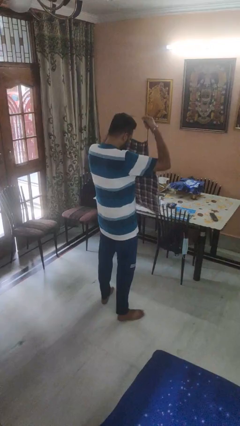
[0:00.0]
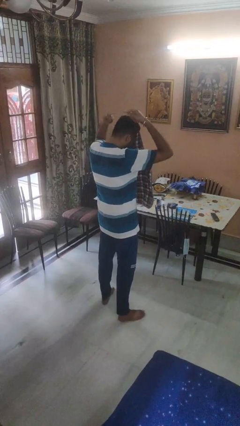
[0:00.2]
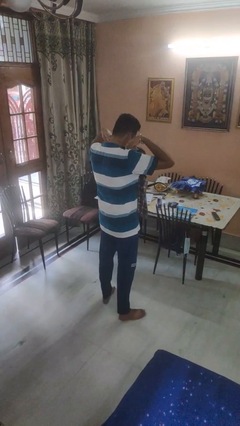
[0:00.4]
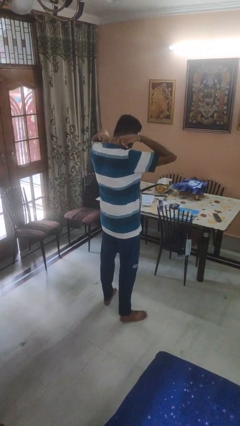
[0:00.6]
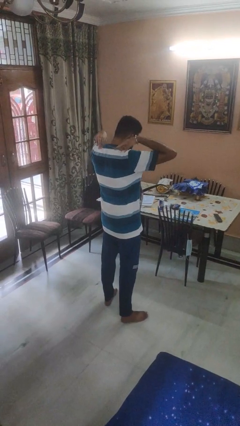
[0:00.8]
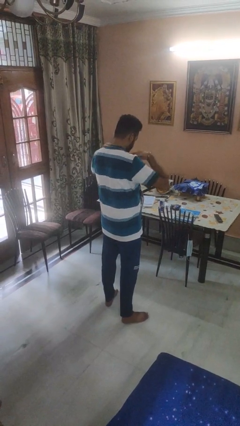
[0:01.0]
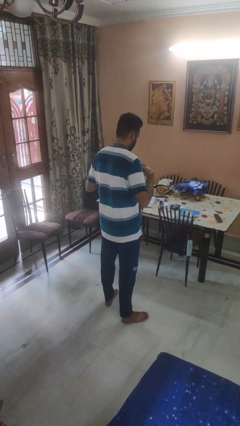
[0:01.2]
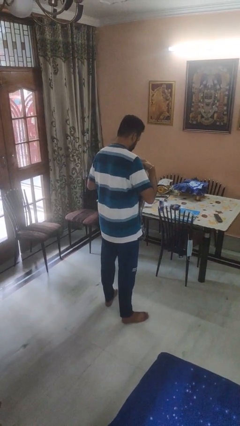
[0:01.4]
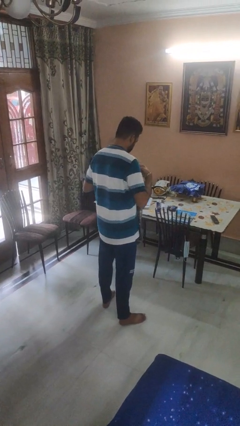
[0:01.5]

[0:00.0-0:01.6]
person puts on apron

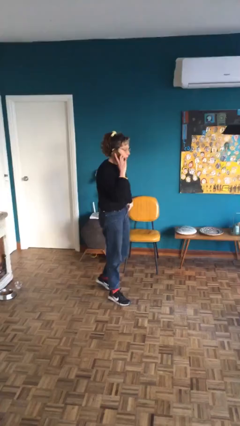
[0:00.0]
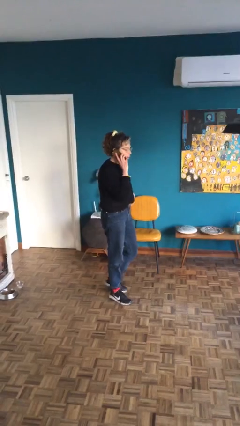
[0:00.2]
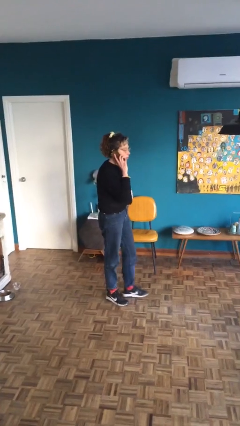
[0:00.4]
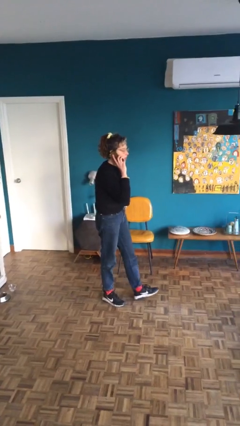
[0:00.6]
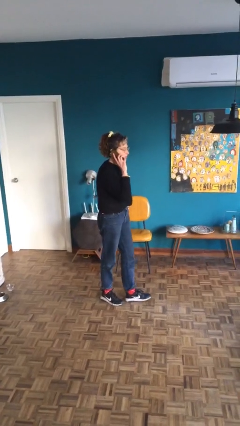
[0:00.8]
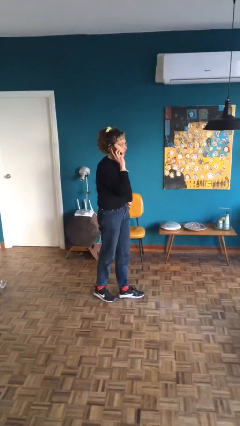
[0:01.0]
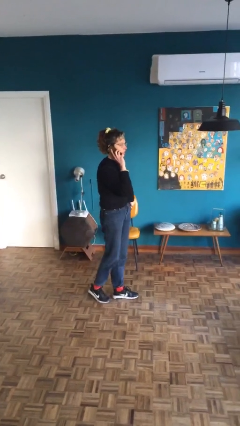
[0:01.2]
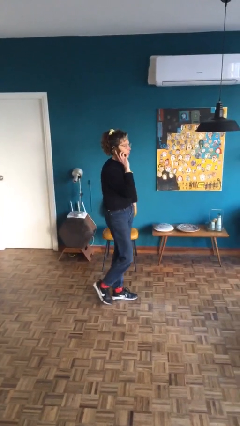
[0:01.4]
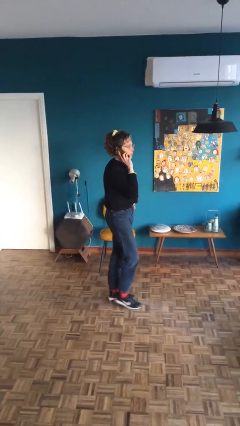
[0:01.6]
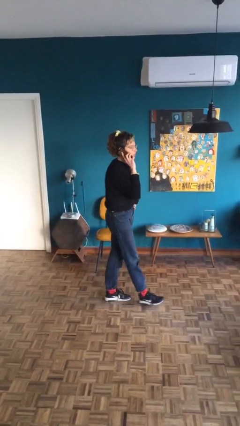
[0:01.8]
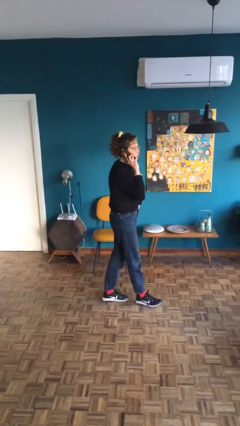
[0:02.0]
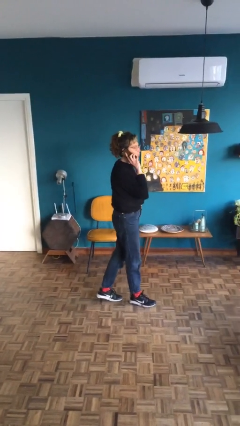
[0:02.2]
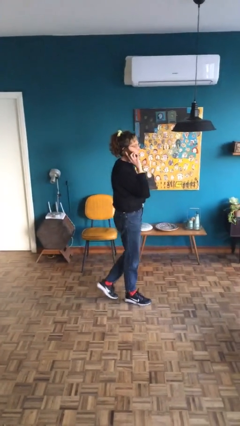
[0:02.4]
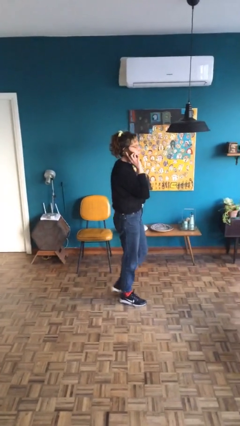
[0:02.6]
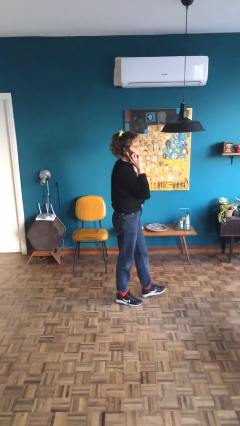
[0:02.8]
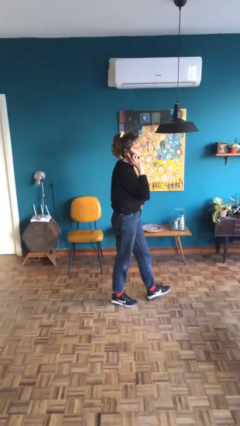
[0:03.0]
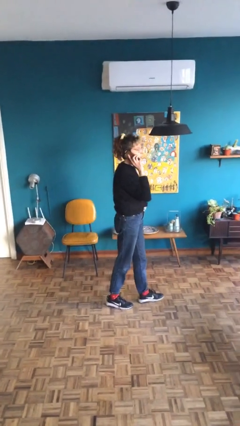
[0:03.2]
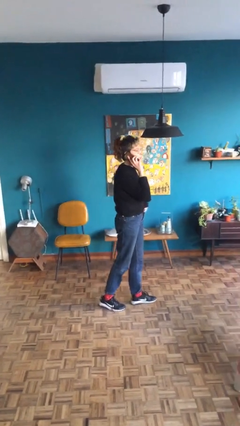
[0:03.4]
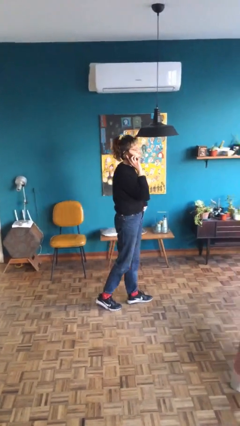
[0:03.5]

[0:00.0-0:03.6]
person talks on phone

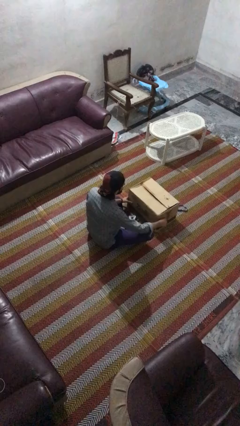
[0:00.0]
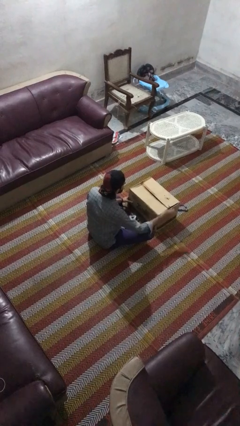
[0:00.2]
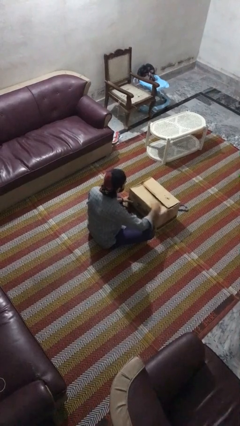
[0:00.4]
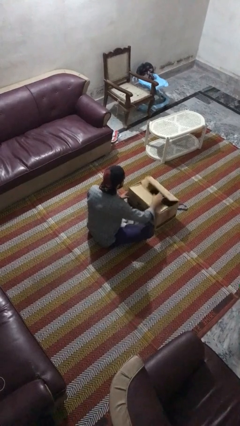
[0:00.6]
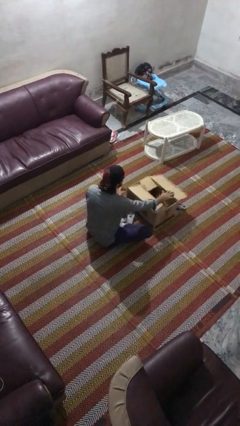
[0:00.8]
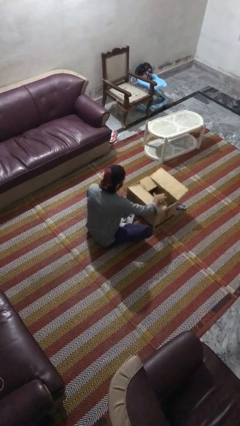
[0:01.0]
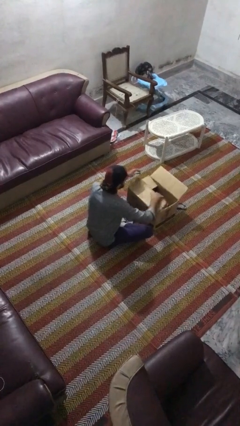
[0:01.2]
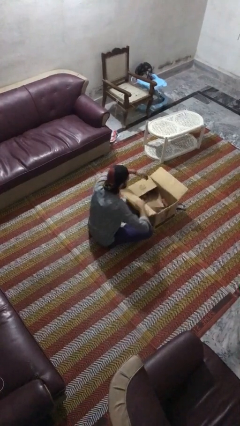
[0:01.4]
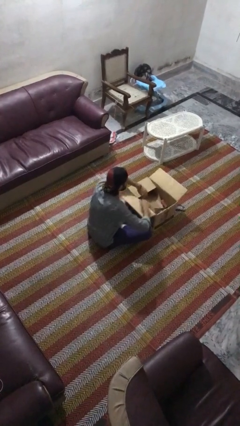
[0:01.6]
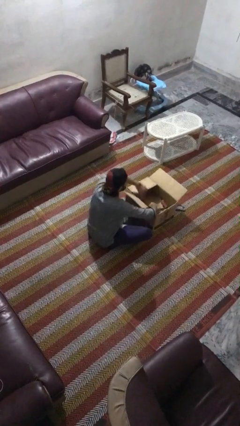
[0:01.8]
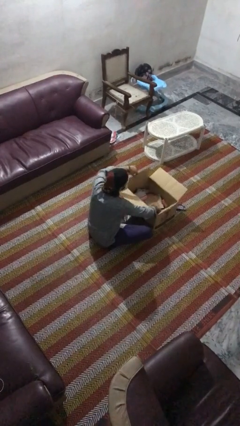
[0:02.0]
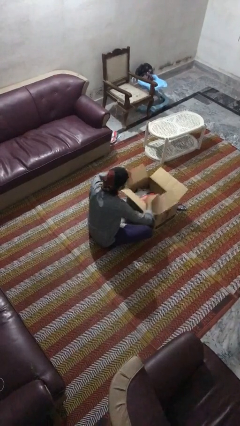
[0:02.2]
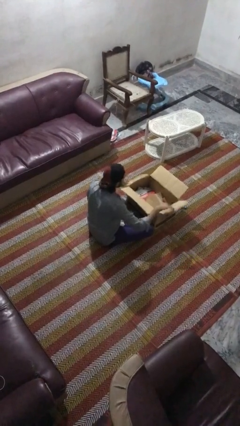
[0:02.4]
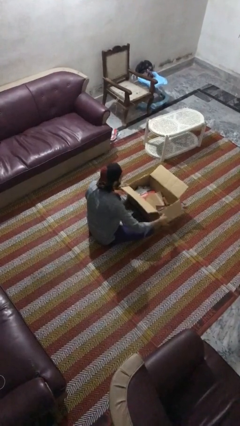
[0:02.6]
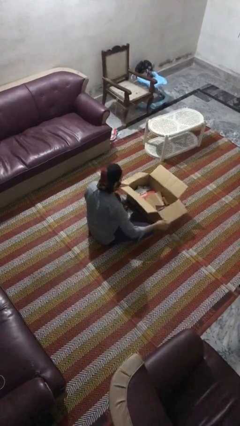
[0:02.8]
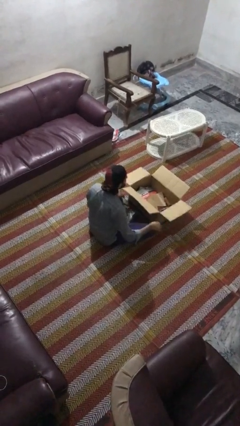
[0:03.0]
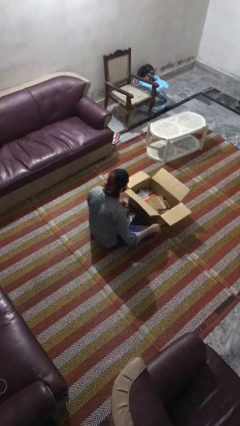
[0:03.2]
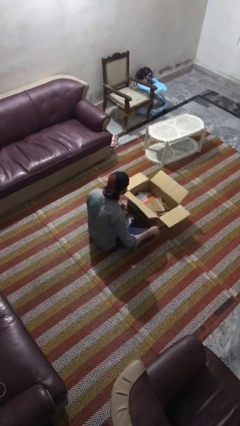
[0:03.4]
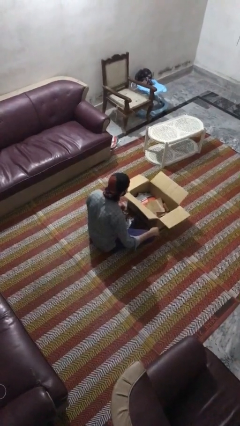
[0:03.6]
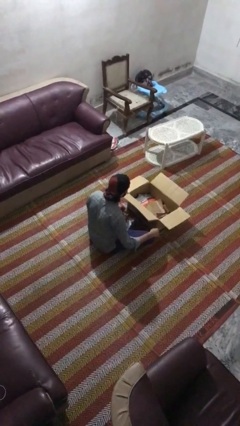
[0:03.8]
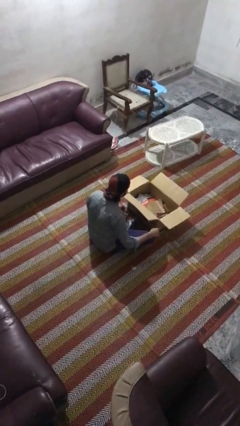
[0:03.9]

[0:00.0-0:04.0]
person opens box

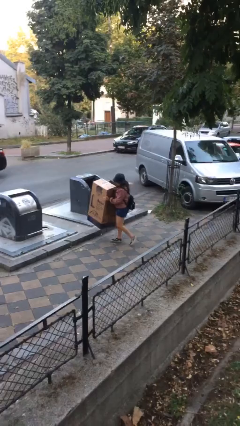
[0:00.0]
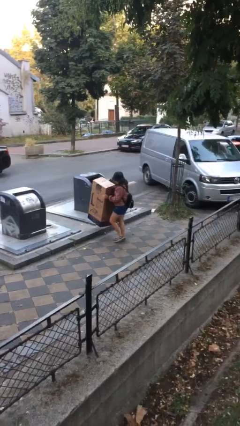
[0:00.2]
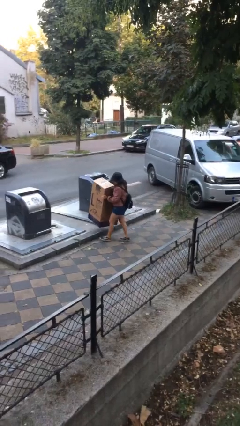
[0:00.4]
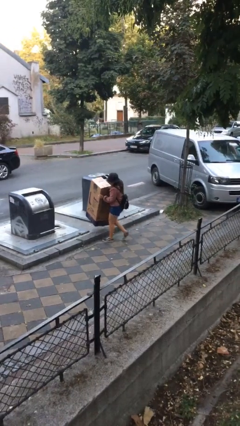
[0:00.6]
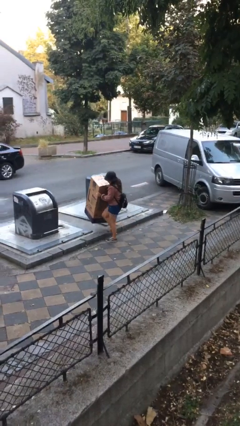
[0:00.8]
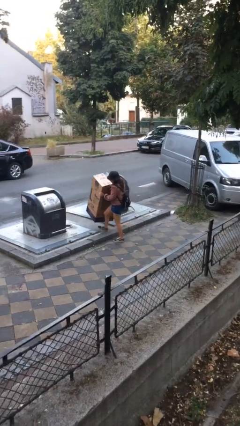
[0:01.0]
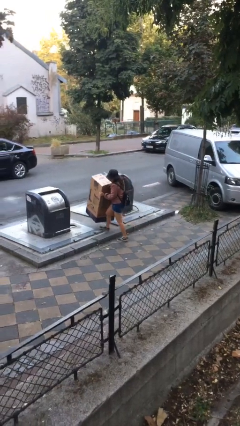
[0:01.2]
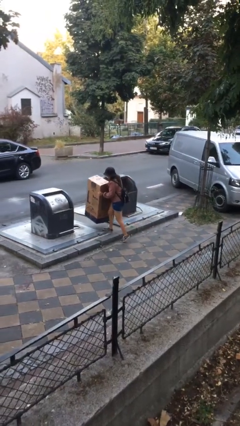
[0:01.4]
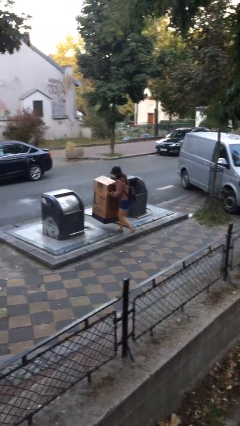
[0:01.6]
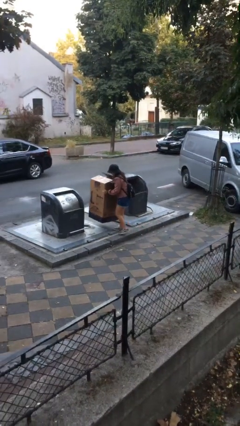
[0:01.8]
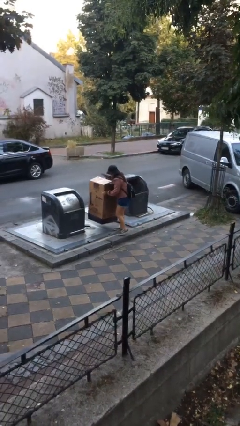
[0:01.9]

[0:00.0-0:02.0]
person carries heavy object

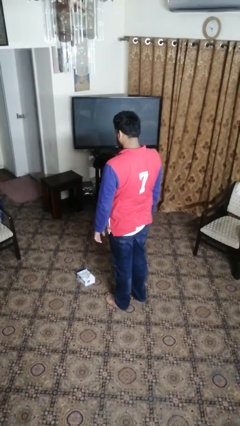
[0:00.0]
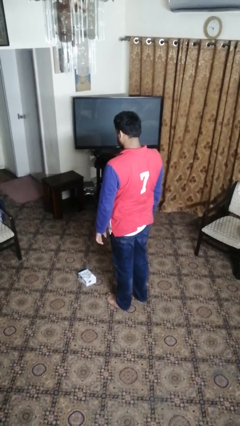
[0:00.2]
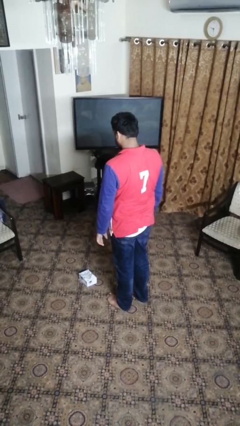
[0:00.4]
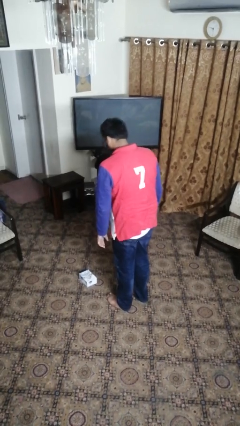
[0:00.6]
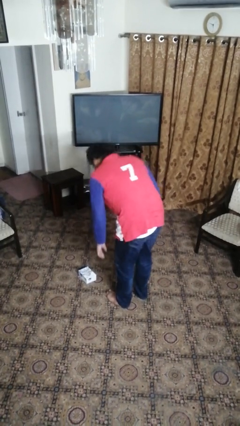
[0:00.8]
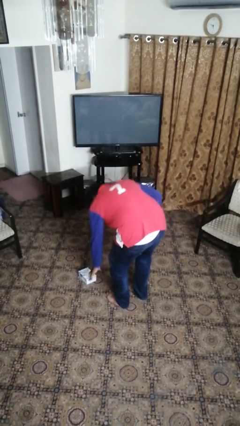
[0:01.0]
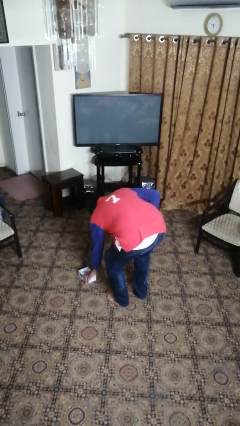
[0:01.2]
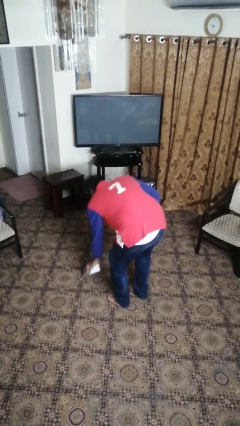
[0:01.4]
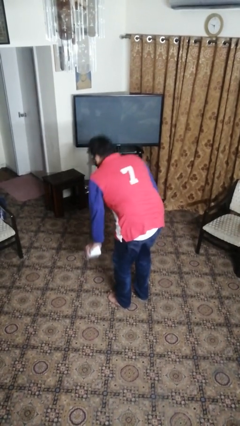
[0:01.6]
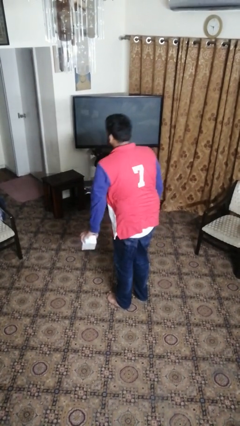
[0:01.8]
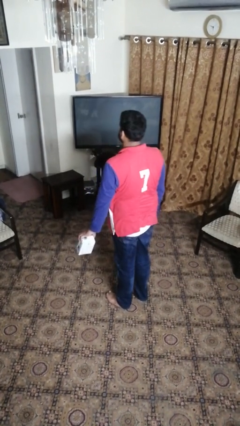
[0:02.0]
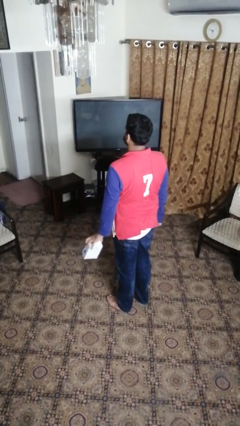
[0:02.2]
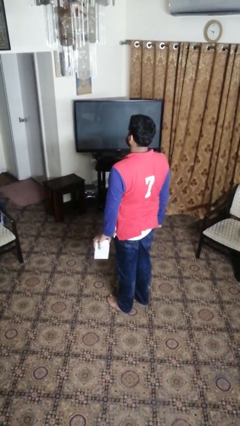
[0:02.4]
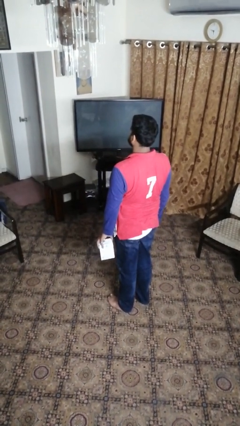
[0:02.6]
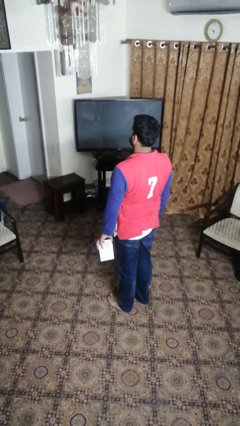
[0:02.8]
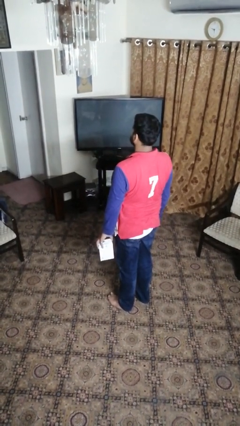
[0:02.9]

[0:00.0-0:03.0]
person picks up object from floor

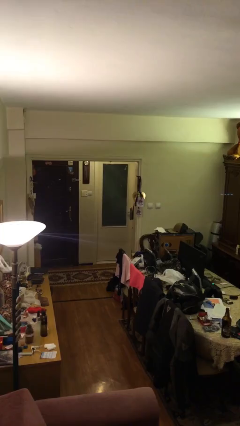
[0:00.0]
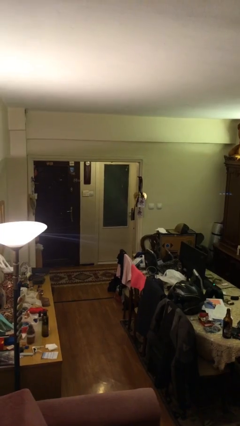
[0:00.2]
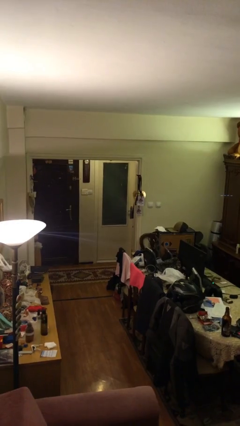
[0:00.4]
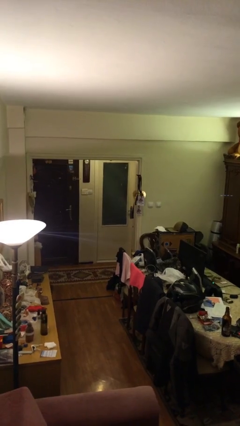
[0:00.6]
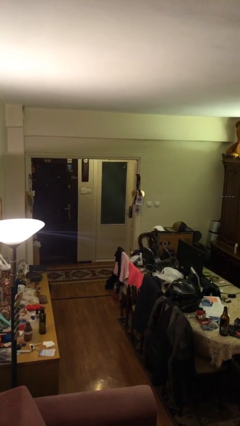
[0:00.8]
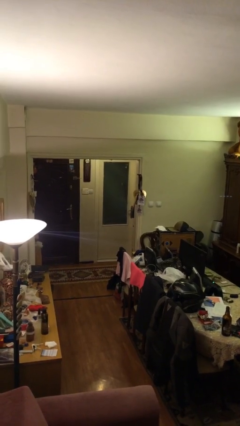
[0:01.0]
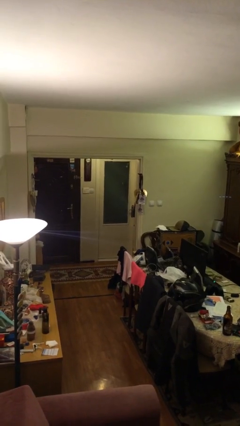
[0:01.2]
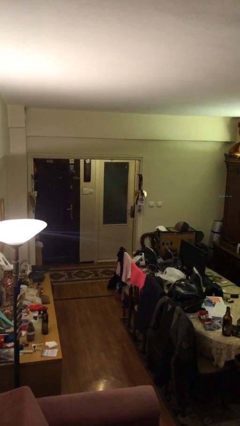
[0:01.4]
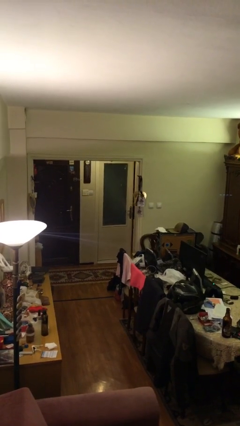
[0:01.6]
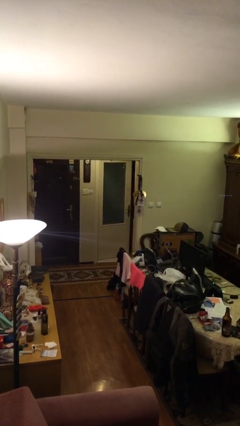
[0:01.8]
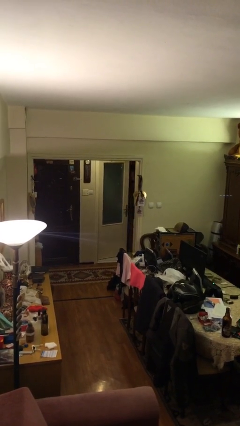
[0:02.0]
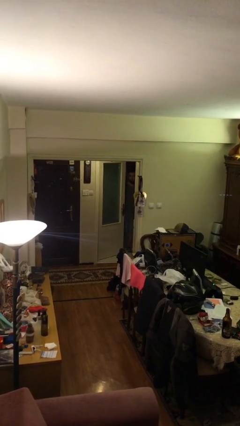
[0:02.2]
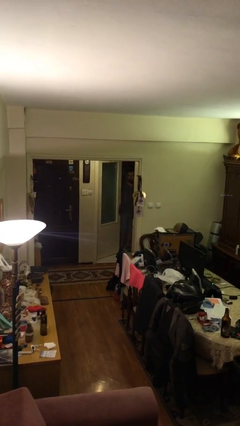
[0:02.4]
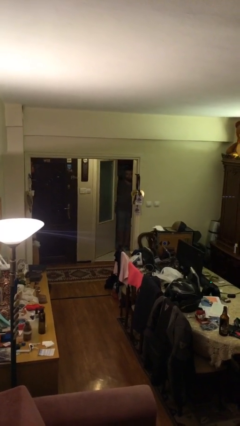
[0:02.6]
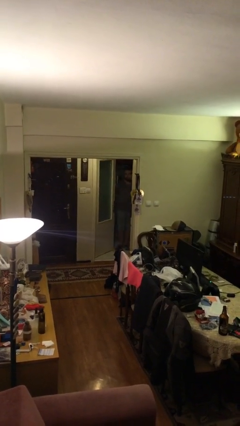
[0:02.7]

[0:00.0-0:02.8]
person opens facility door

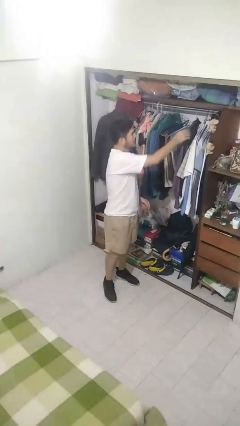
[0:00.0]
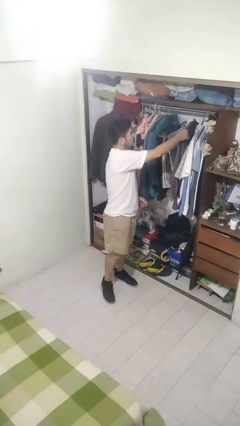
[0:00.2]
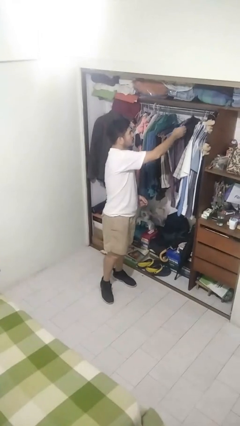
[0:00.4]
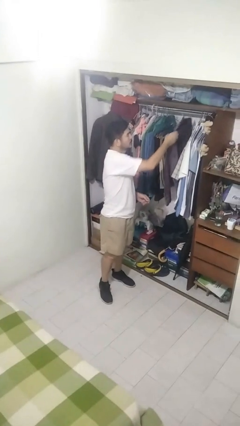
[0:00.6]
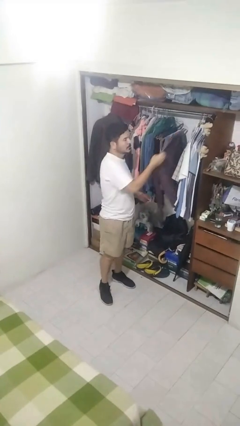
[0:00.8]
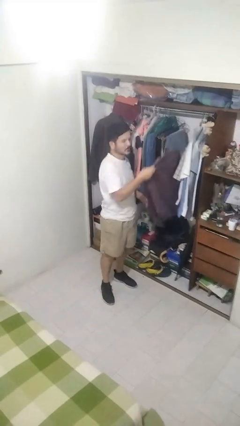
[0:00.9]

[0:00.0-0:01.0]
person takes clothes from closet
